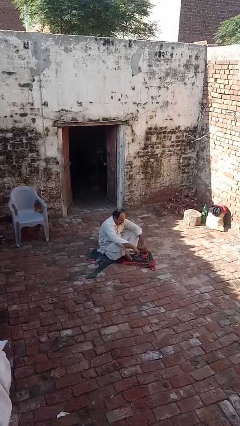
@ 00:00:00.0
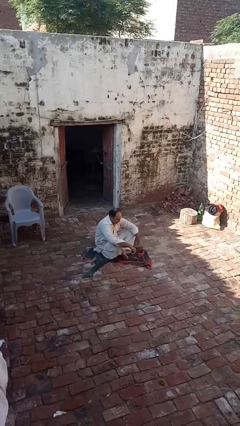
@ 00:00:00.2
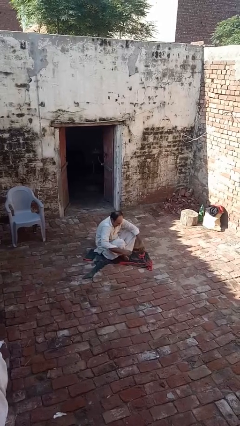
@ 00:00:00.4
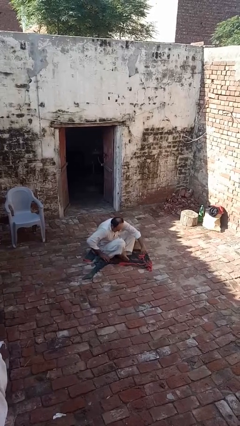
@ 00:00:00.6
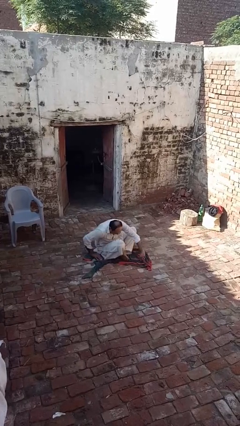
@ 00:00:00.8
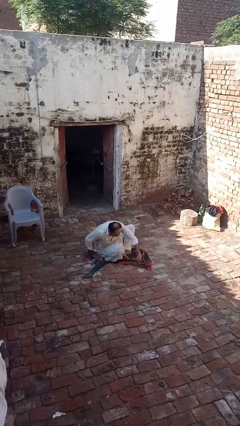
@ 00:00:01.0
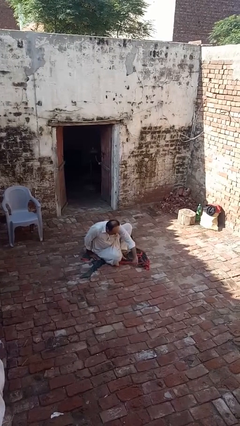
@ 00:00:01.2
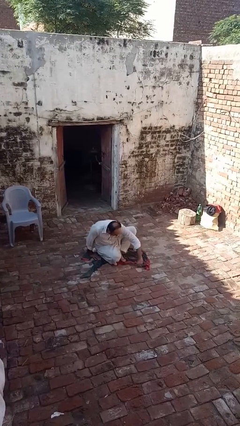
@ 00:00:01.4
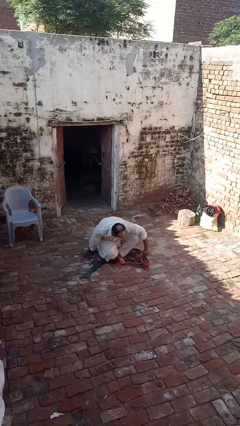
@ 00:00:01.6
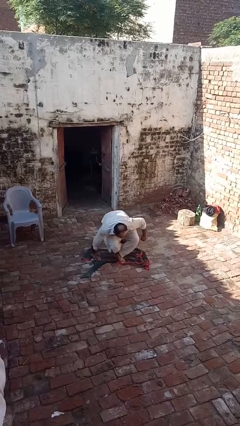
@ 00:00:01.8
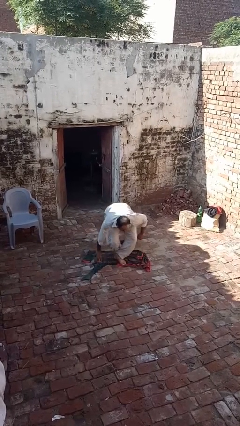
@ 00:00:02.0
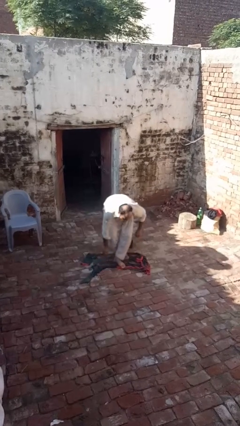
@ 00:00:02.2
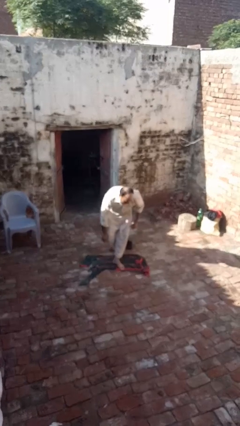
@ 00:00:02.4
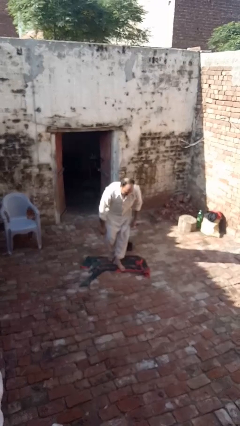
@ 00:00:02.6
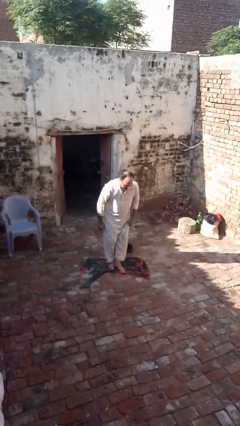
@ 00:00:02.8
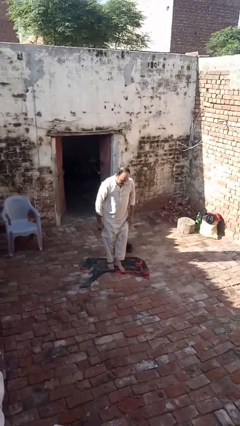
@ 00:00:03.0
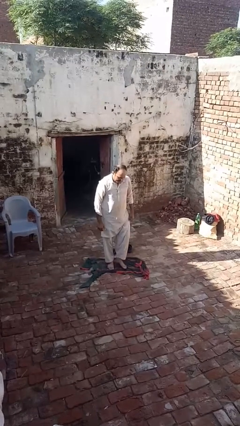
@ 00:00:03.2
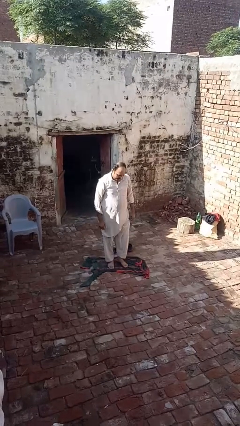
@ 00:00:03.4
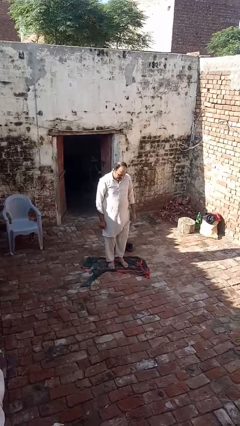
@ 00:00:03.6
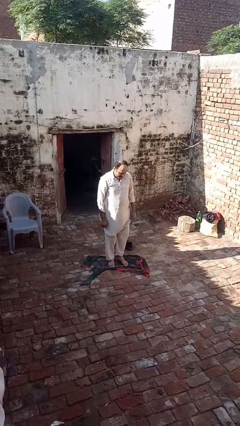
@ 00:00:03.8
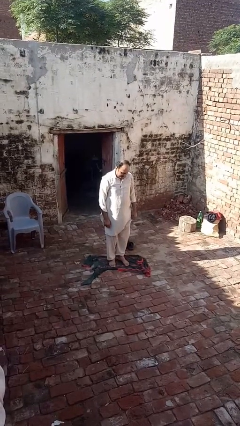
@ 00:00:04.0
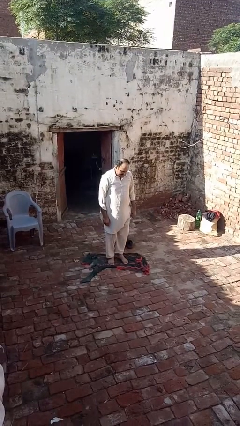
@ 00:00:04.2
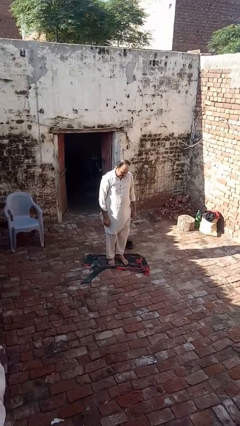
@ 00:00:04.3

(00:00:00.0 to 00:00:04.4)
person stands up from floor

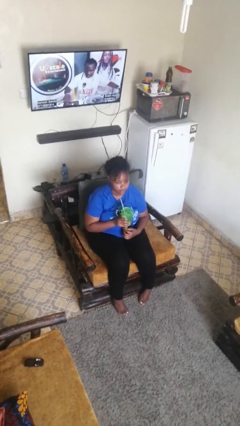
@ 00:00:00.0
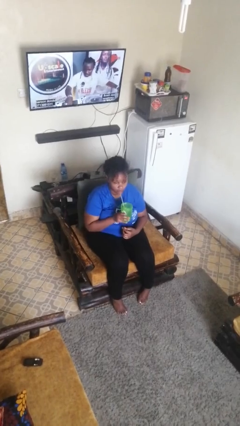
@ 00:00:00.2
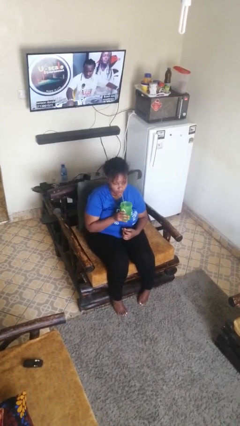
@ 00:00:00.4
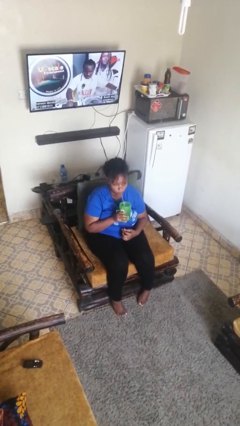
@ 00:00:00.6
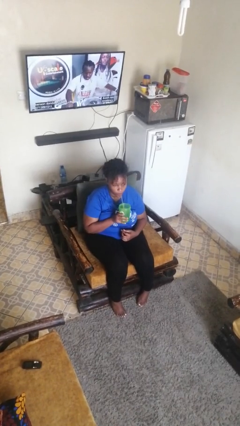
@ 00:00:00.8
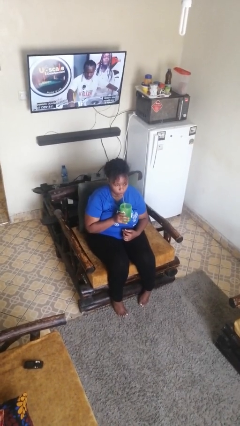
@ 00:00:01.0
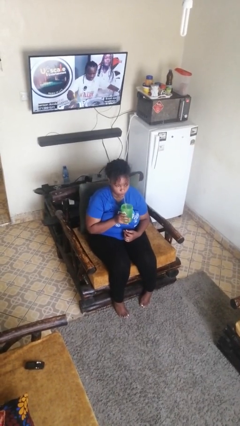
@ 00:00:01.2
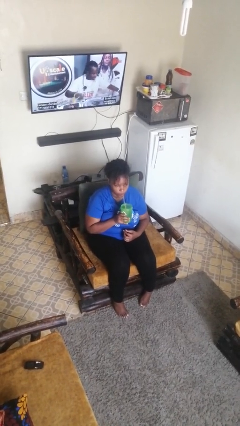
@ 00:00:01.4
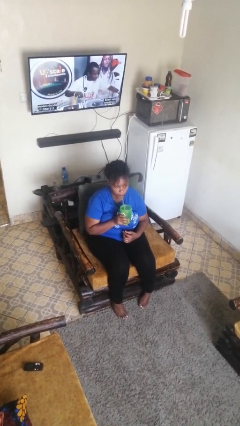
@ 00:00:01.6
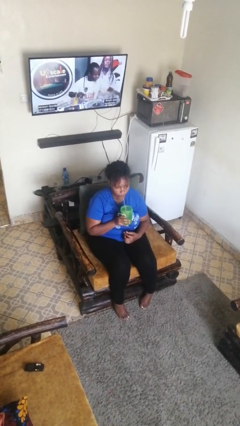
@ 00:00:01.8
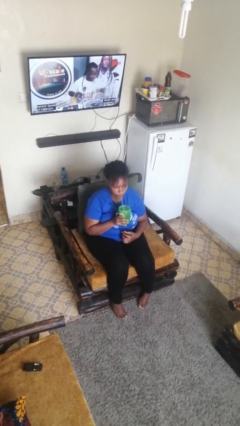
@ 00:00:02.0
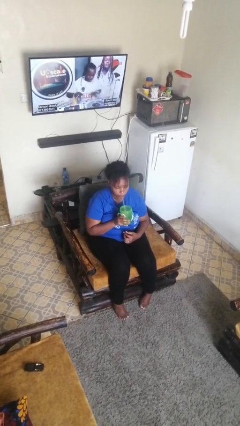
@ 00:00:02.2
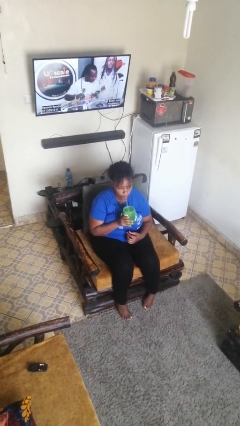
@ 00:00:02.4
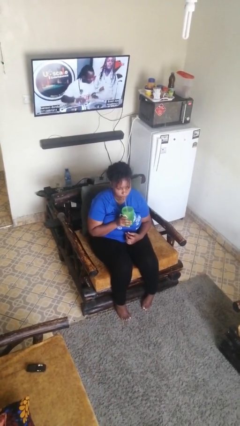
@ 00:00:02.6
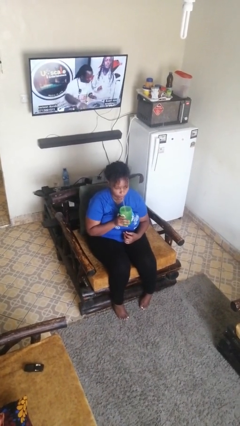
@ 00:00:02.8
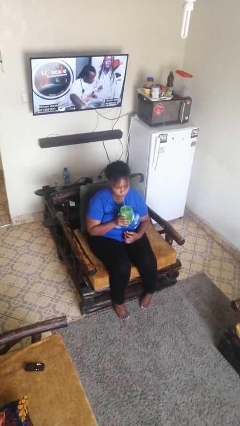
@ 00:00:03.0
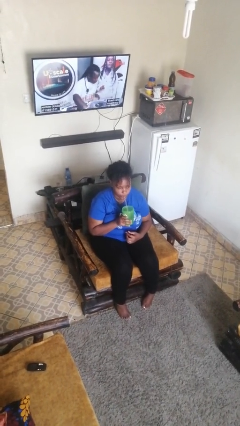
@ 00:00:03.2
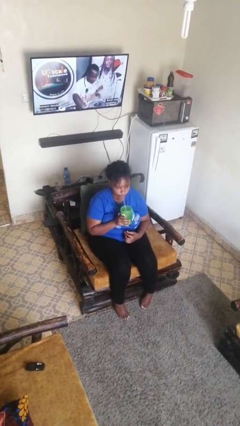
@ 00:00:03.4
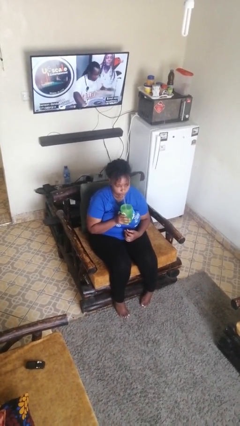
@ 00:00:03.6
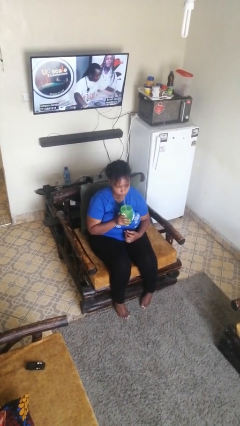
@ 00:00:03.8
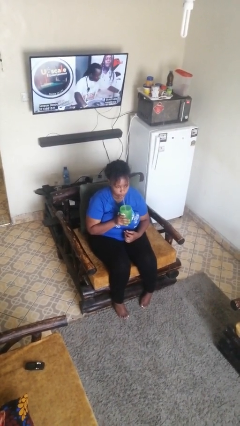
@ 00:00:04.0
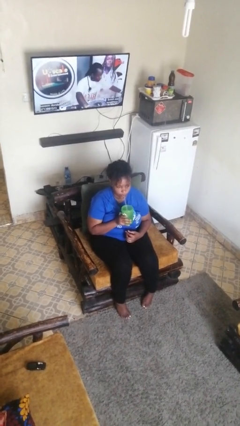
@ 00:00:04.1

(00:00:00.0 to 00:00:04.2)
person drinks from straw

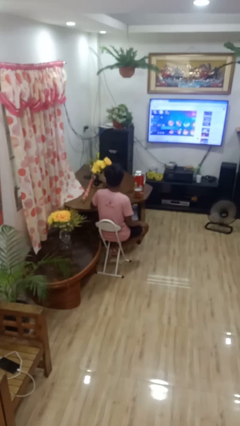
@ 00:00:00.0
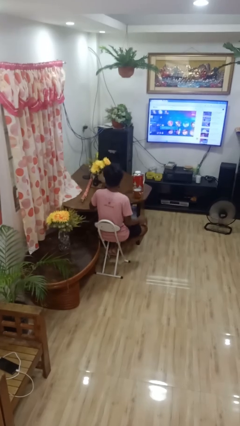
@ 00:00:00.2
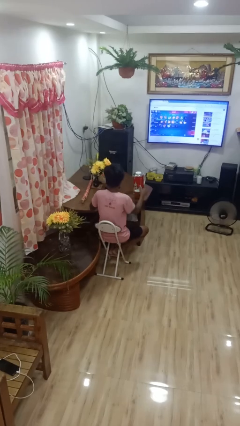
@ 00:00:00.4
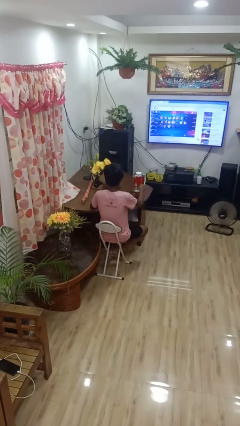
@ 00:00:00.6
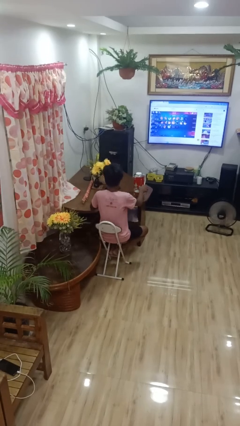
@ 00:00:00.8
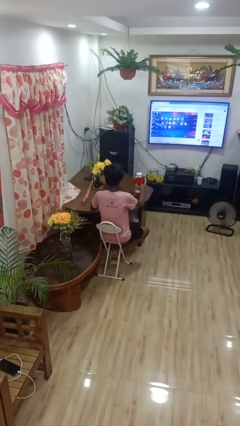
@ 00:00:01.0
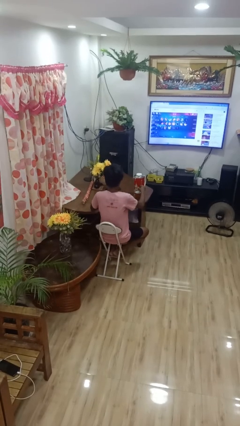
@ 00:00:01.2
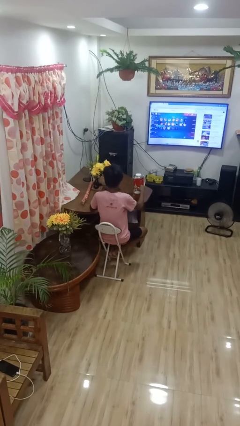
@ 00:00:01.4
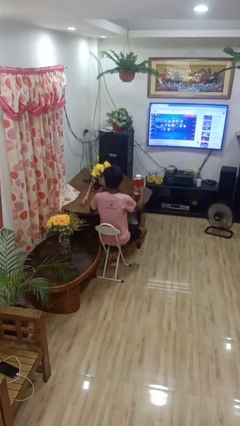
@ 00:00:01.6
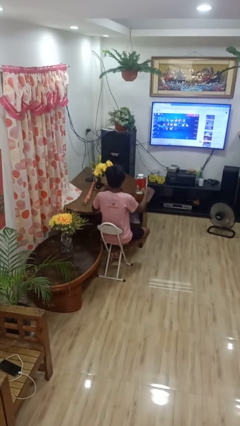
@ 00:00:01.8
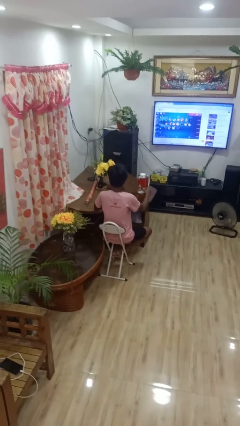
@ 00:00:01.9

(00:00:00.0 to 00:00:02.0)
person stirs mug

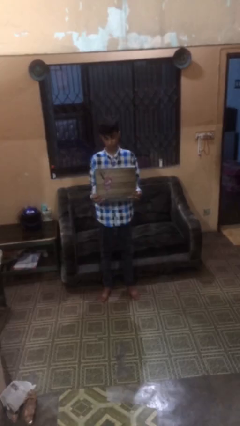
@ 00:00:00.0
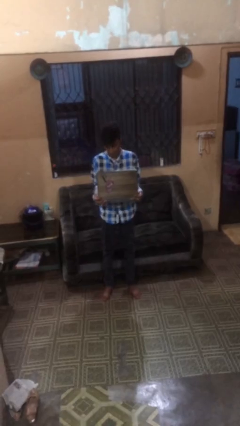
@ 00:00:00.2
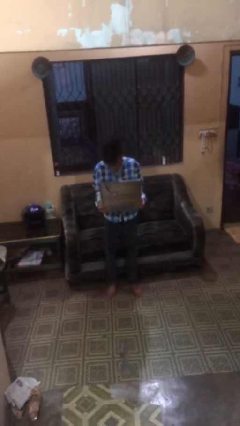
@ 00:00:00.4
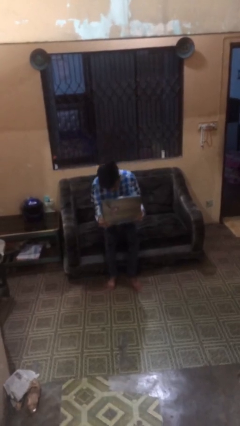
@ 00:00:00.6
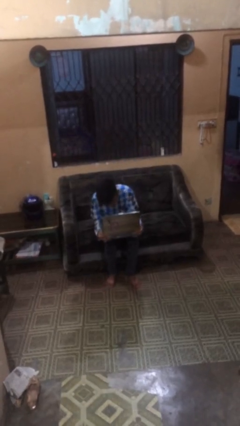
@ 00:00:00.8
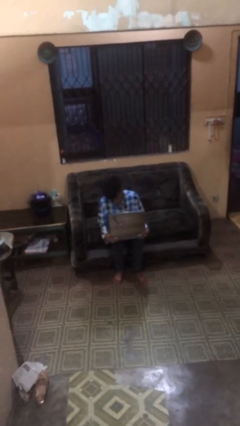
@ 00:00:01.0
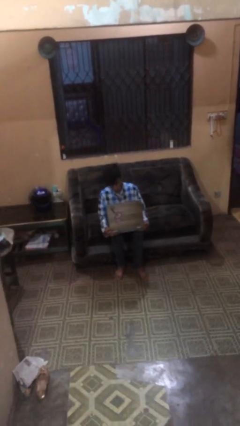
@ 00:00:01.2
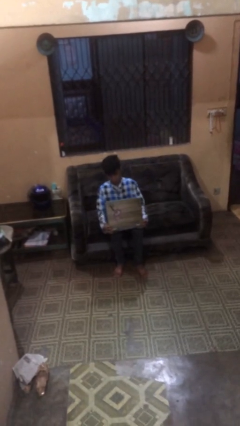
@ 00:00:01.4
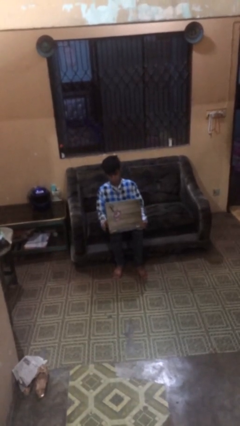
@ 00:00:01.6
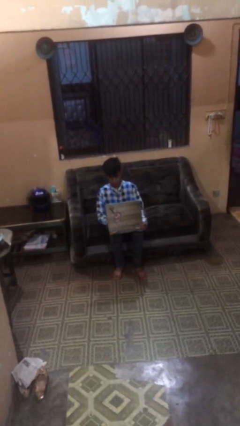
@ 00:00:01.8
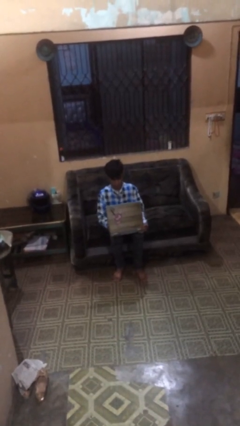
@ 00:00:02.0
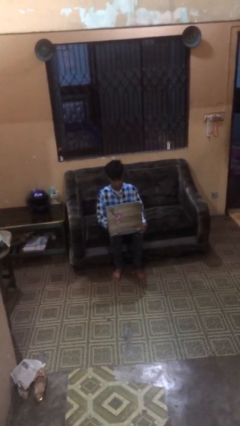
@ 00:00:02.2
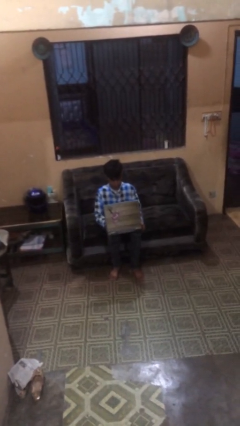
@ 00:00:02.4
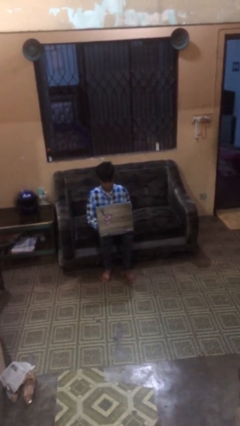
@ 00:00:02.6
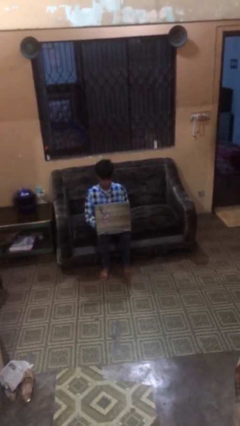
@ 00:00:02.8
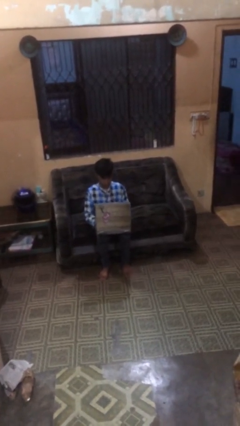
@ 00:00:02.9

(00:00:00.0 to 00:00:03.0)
person sits down

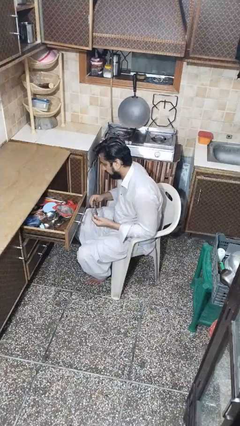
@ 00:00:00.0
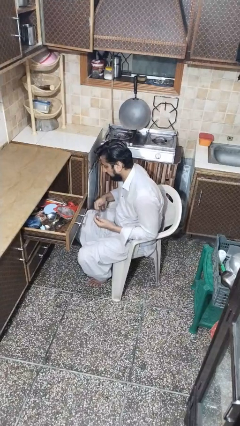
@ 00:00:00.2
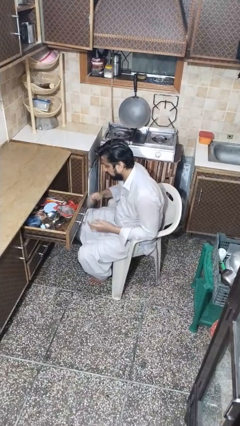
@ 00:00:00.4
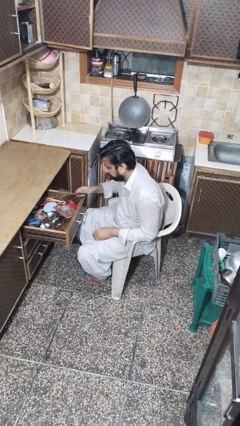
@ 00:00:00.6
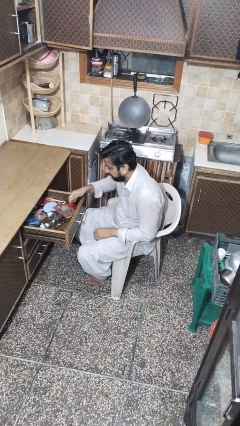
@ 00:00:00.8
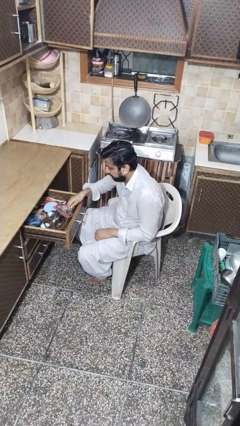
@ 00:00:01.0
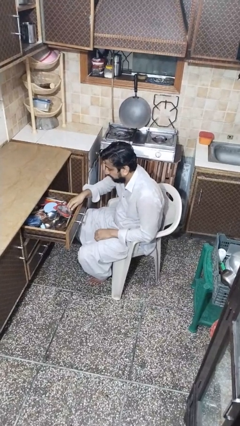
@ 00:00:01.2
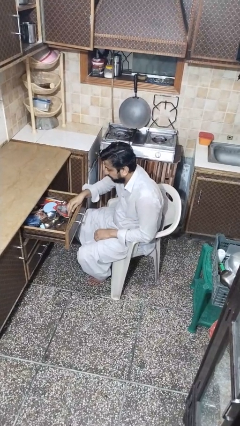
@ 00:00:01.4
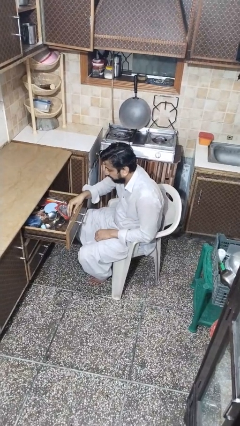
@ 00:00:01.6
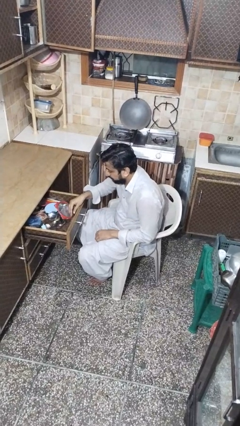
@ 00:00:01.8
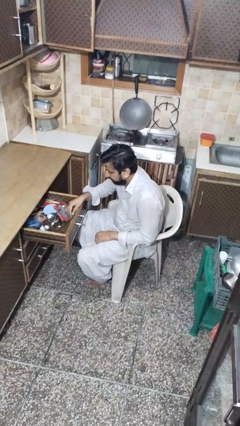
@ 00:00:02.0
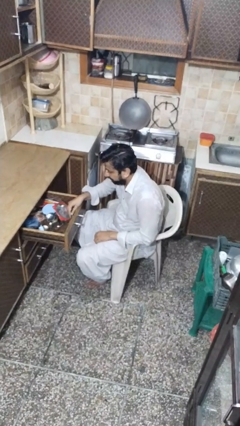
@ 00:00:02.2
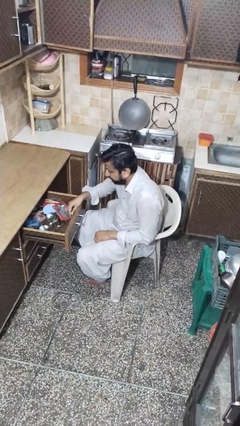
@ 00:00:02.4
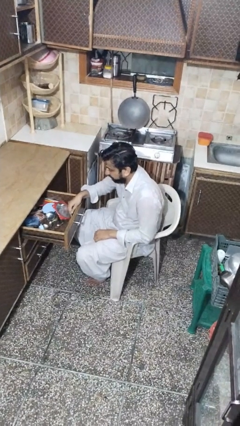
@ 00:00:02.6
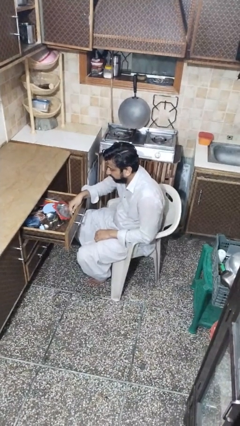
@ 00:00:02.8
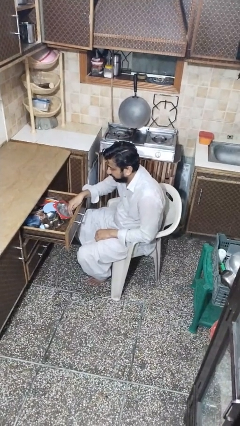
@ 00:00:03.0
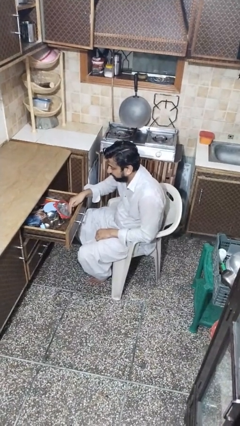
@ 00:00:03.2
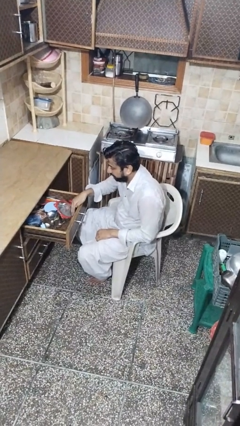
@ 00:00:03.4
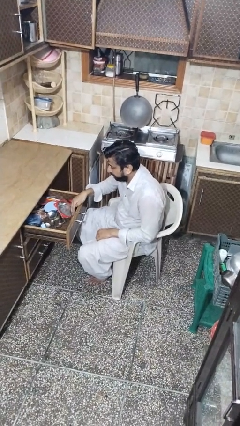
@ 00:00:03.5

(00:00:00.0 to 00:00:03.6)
person puts object into kitchen drawer
